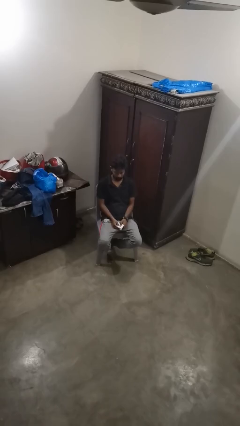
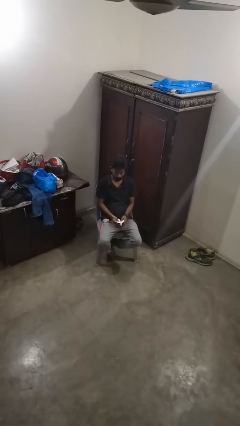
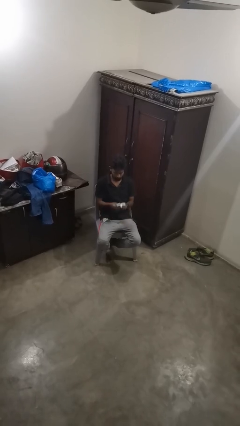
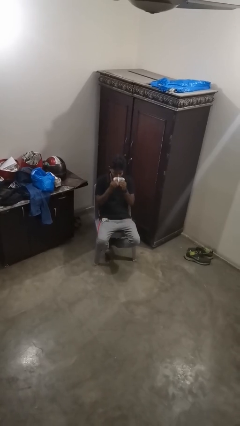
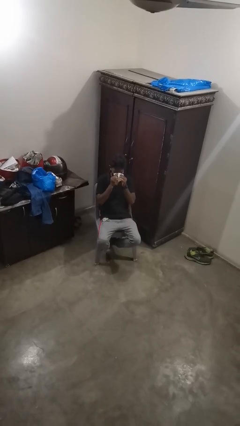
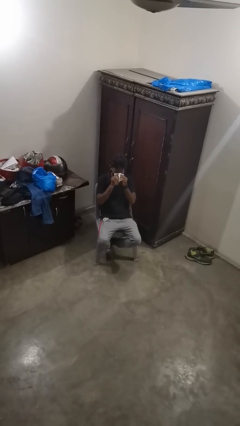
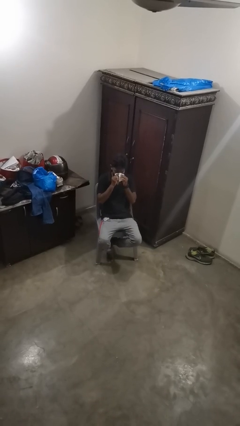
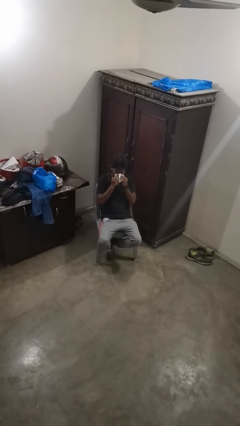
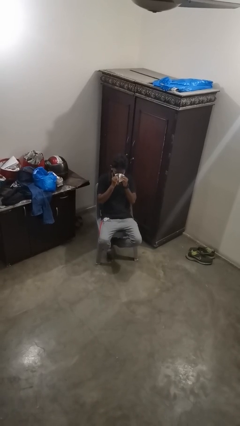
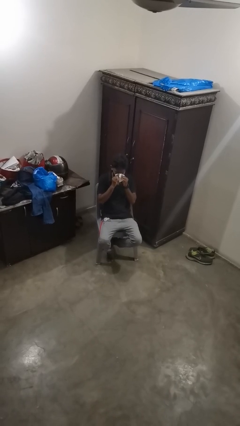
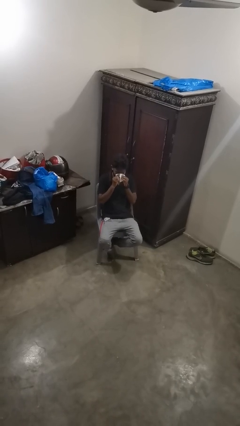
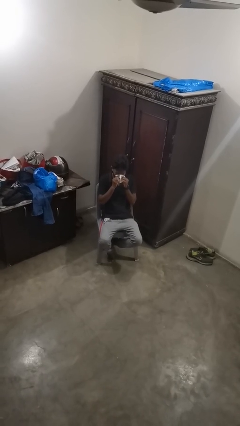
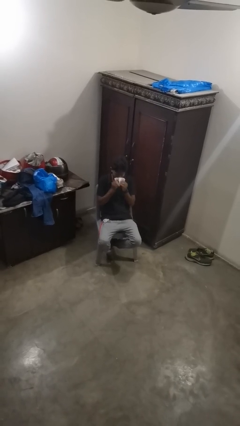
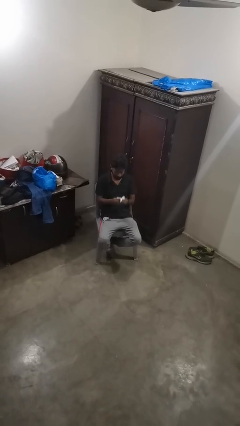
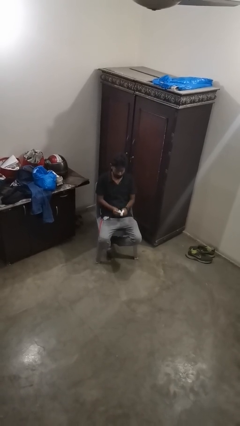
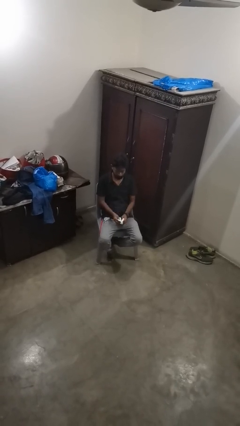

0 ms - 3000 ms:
person blows nose

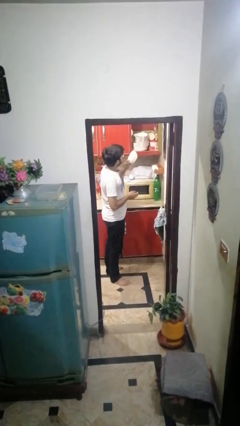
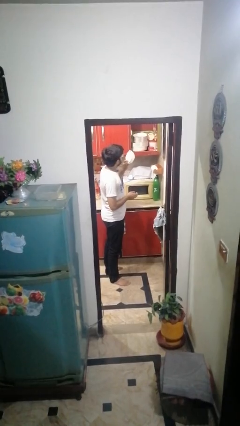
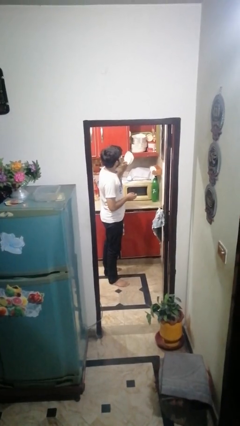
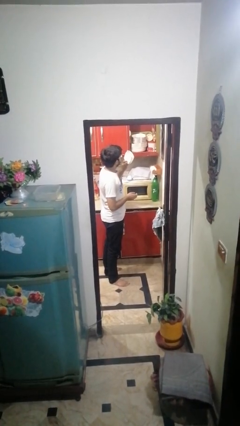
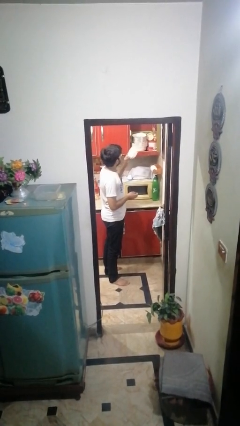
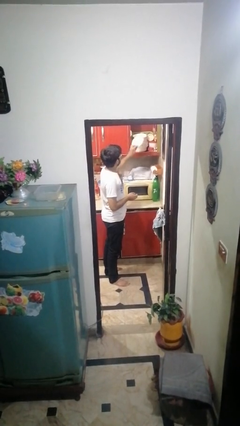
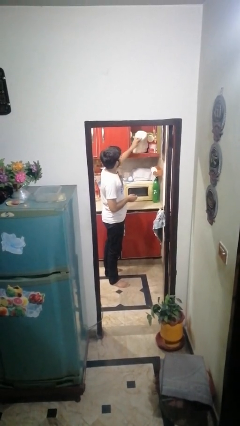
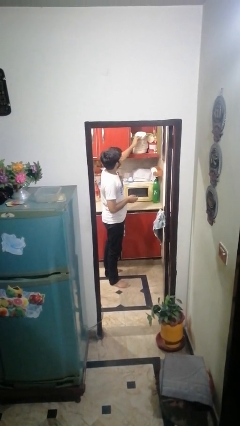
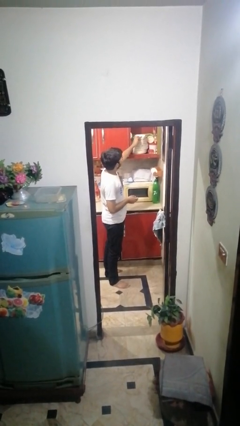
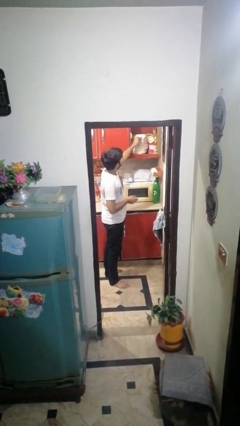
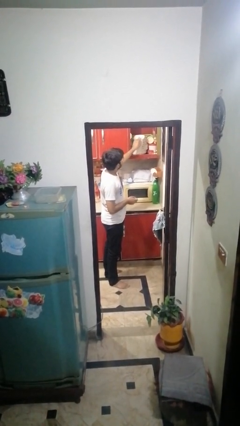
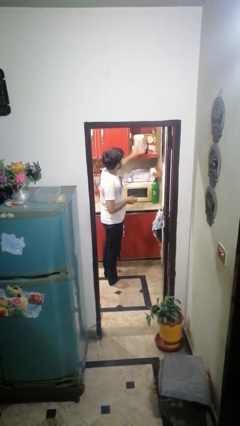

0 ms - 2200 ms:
person puts down object into cabinet

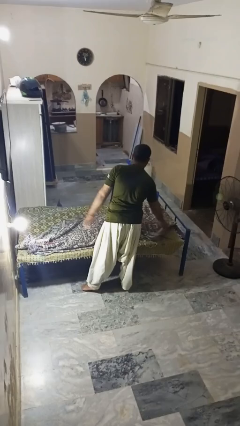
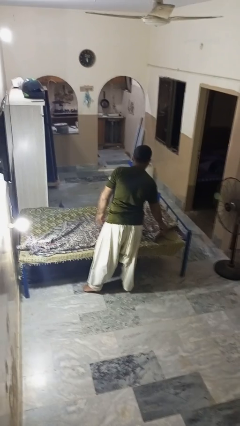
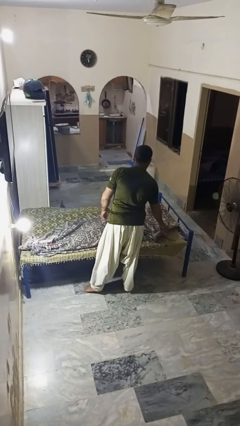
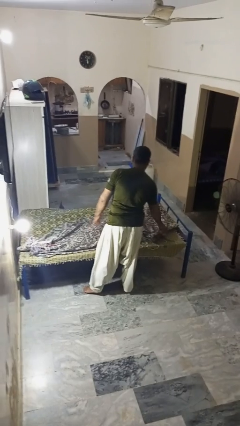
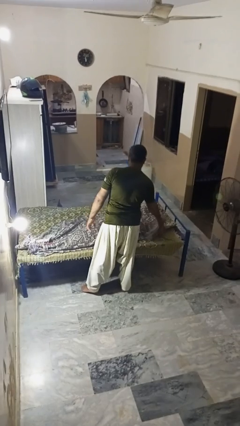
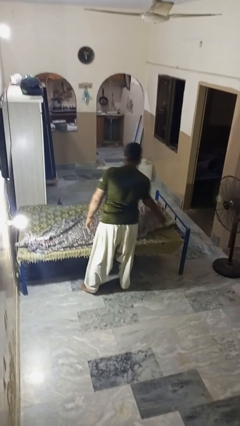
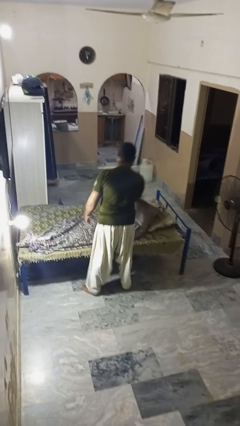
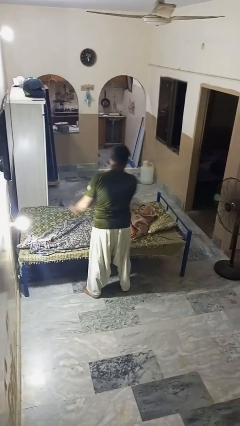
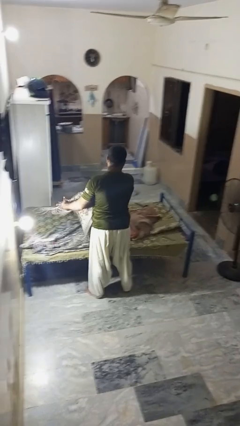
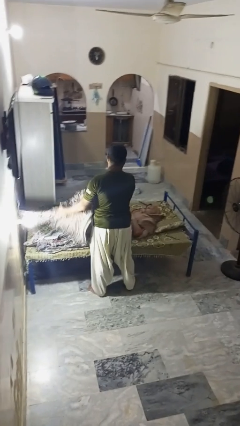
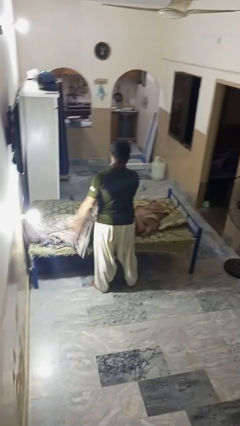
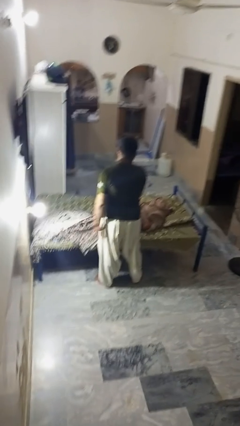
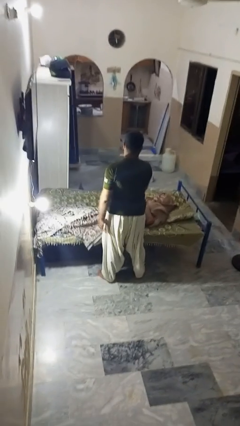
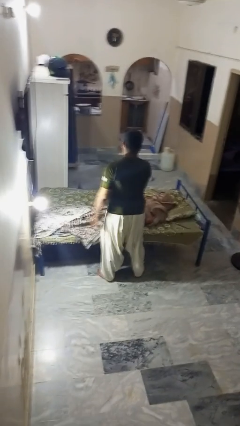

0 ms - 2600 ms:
person uncovers friend with blanket

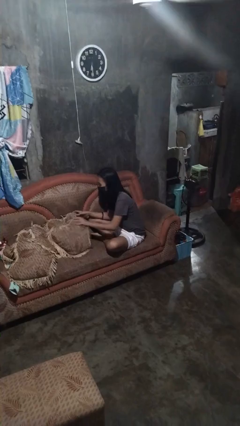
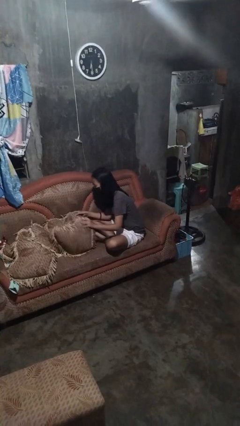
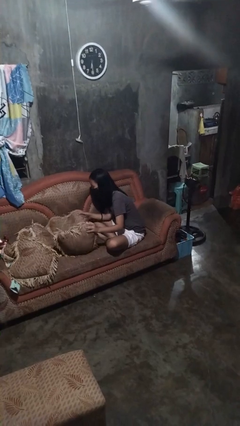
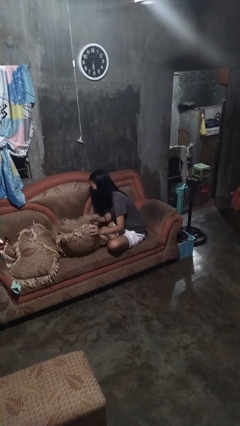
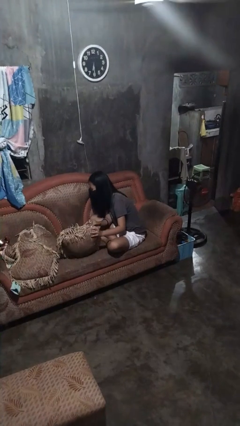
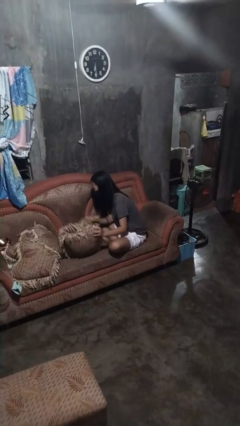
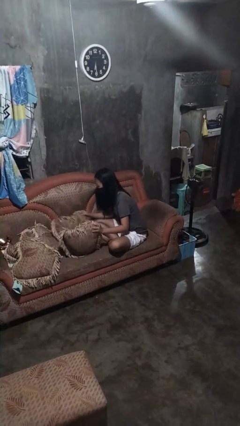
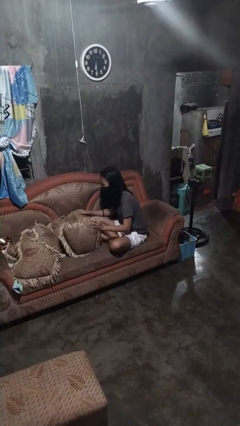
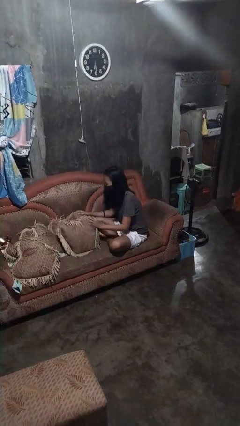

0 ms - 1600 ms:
person searches in couch

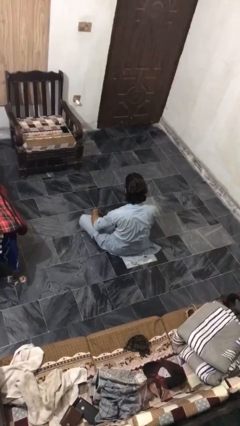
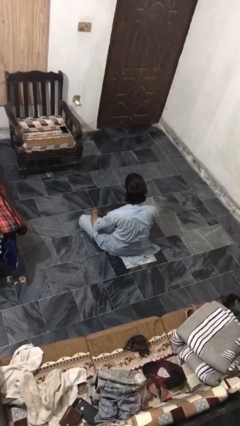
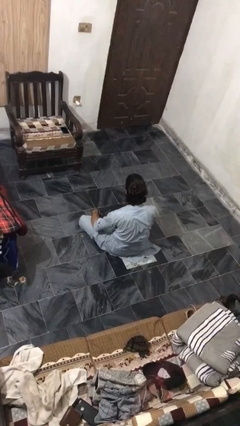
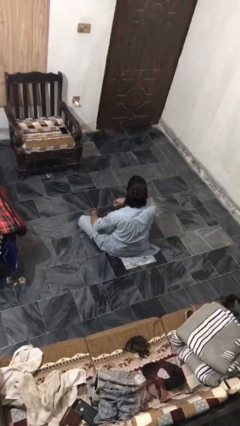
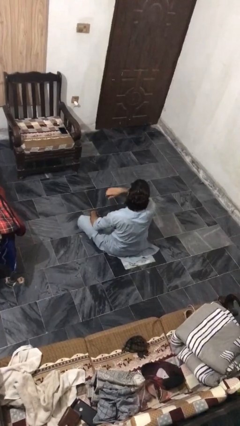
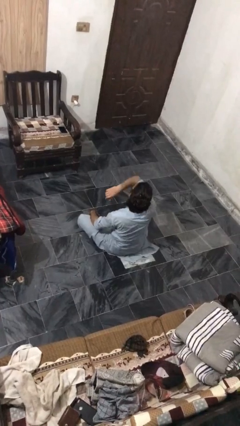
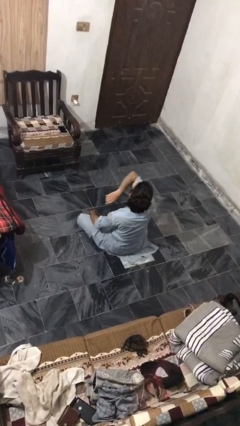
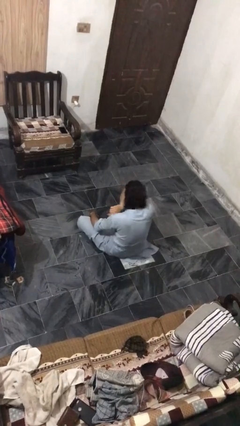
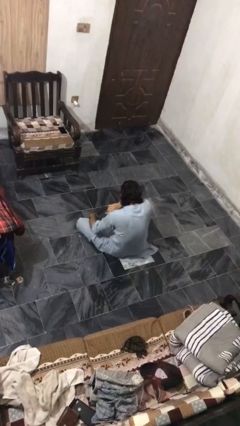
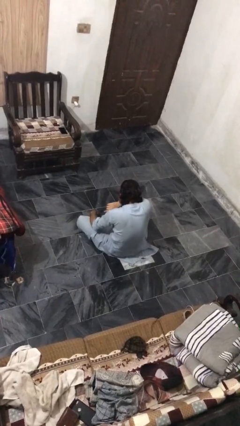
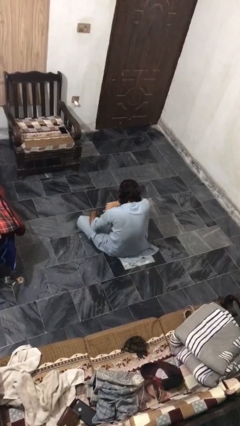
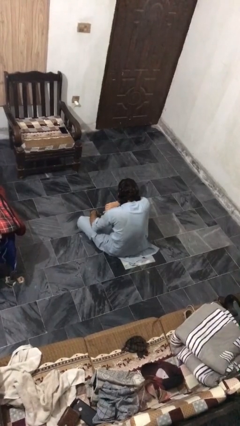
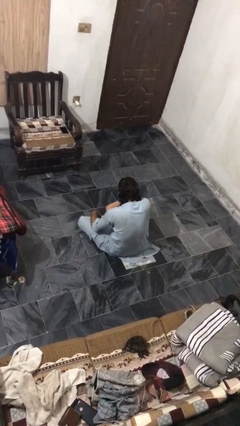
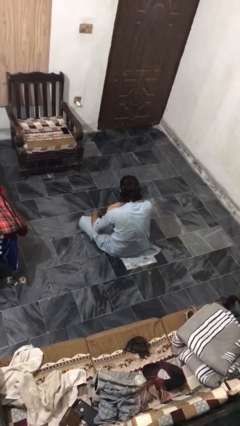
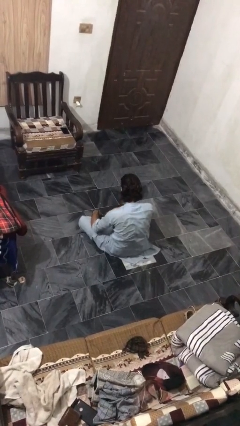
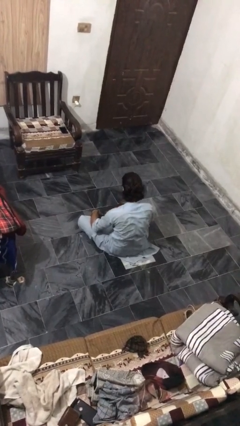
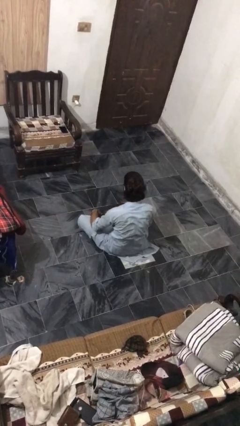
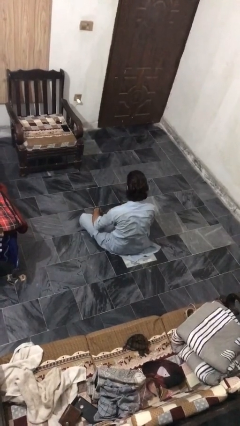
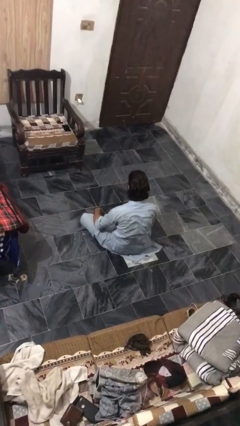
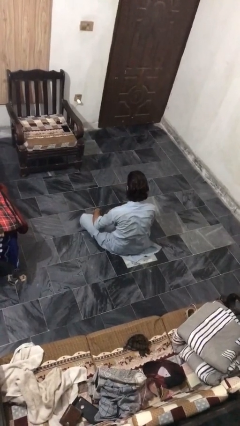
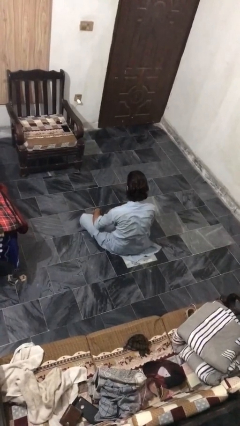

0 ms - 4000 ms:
person sneezes into arm

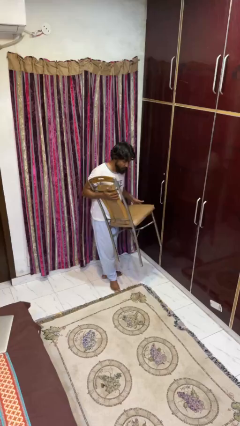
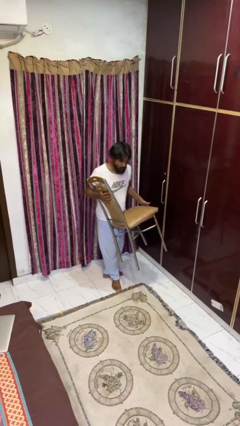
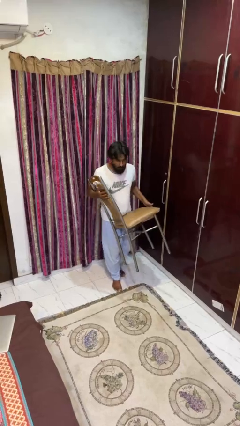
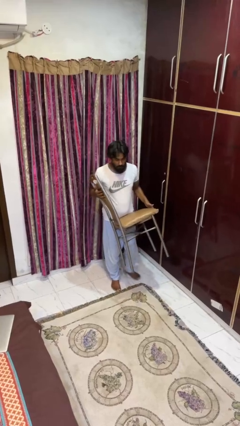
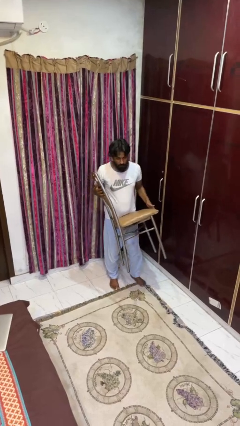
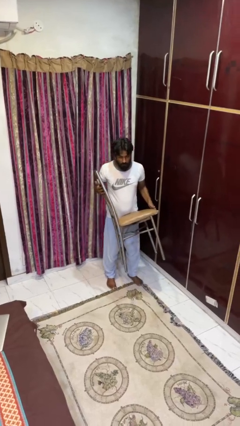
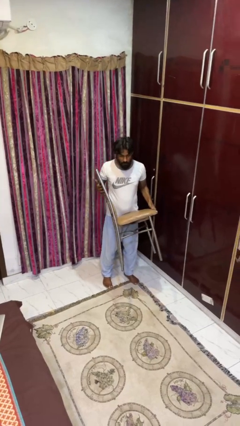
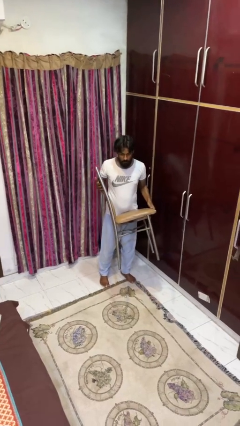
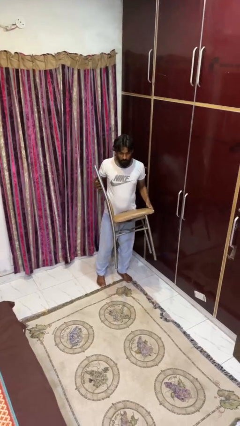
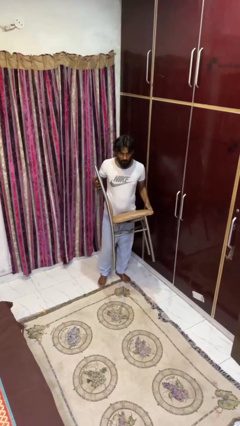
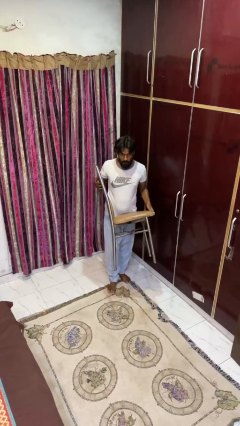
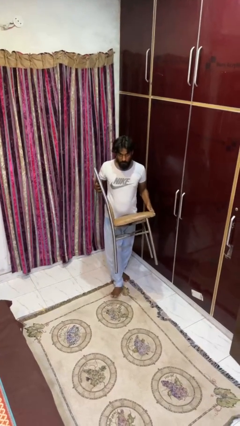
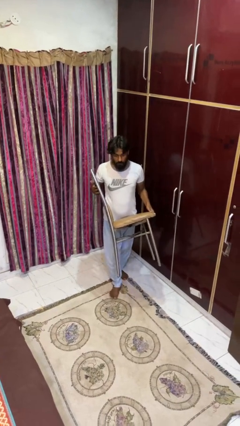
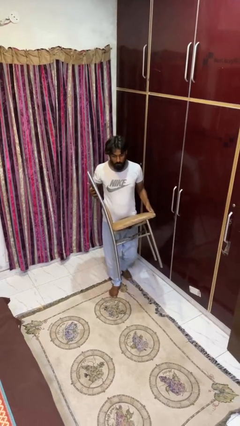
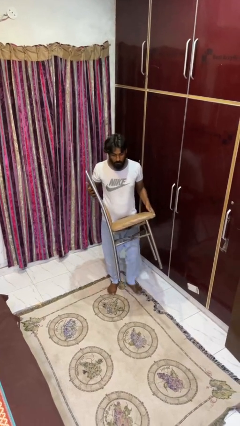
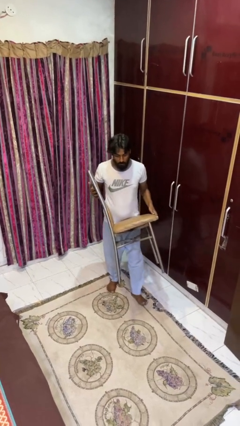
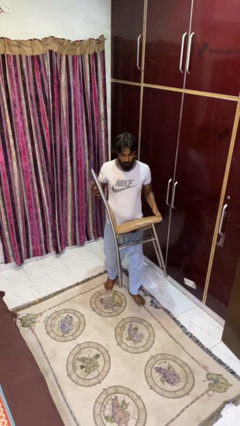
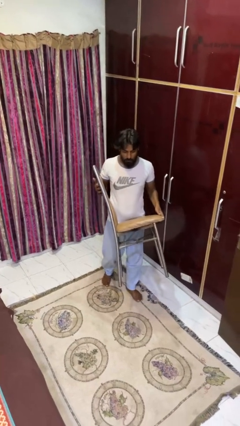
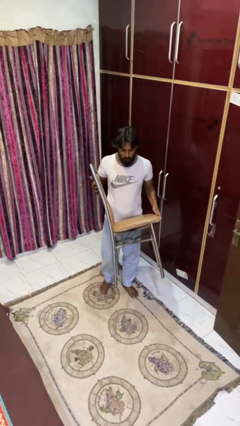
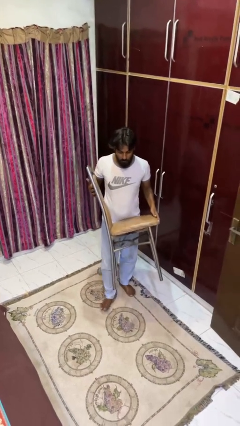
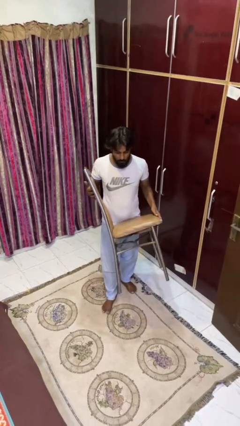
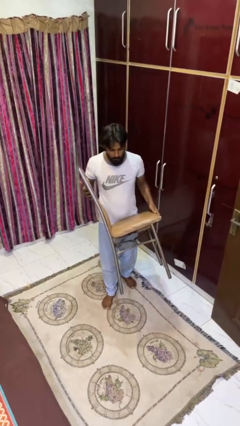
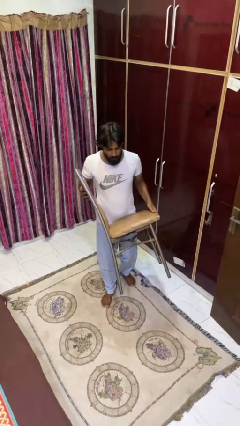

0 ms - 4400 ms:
person carries furniture
